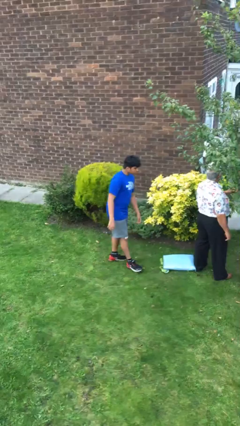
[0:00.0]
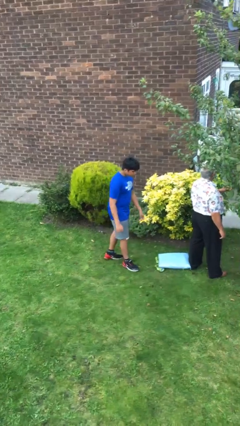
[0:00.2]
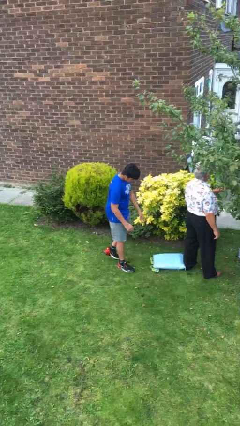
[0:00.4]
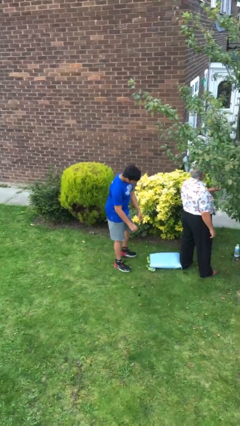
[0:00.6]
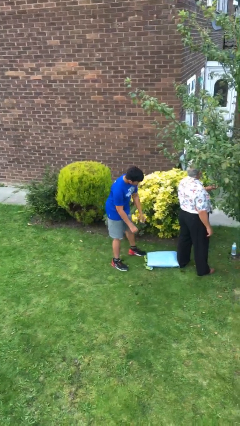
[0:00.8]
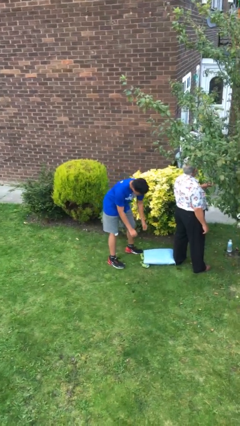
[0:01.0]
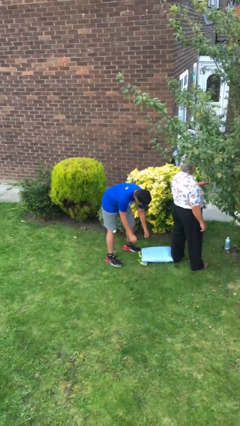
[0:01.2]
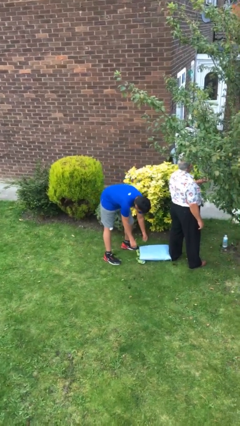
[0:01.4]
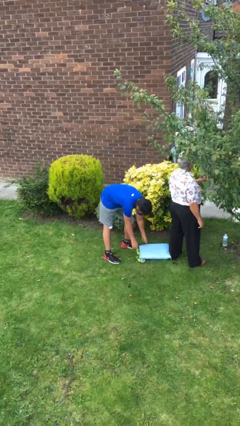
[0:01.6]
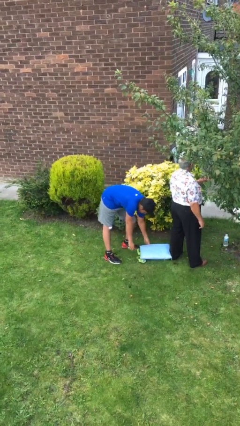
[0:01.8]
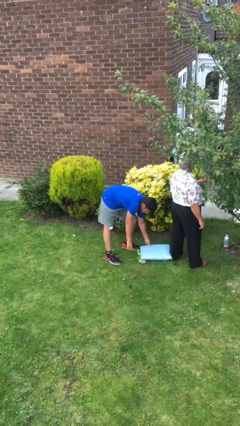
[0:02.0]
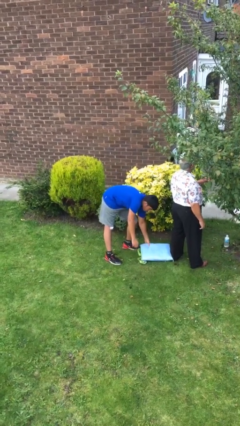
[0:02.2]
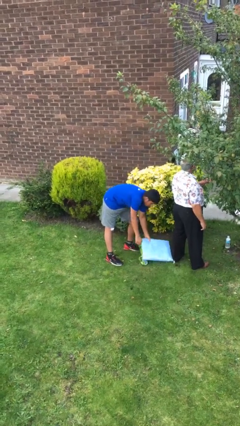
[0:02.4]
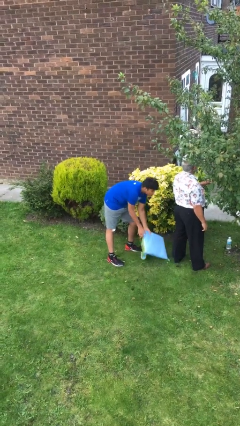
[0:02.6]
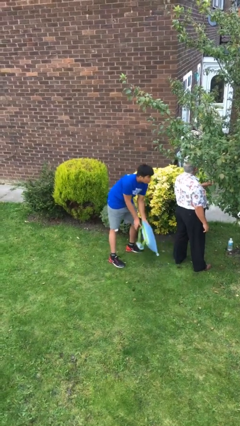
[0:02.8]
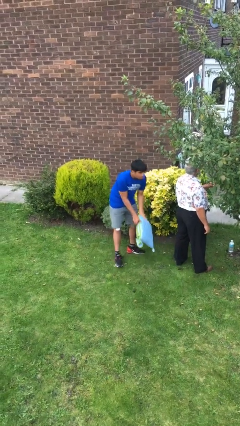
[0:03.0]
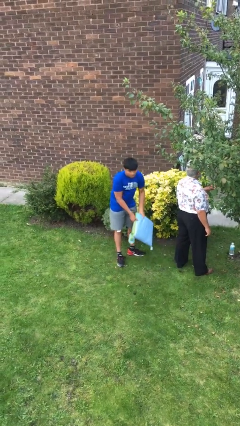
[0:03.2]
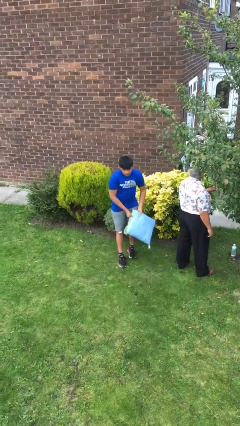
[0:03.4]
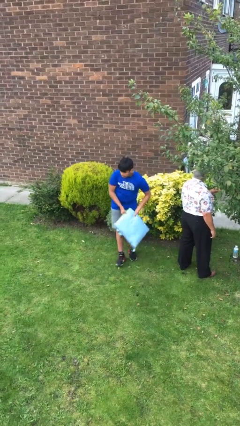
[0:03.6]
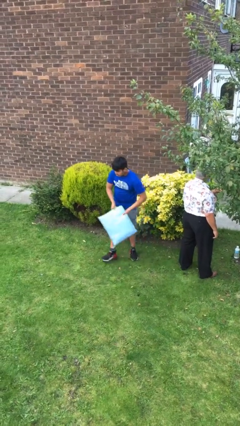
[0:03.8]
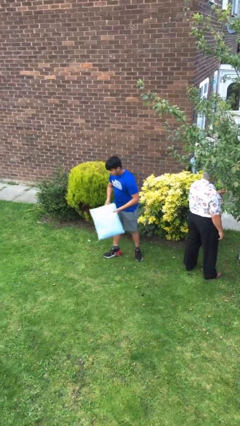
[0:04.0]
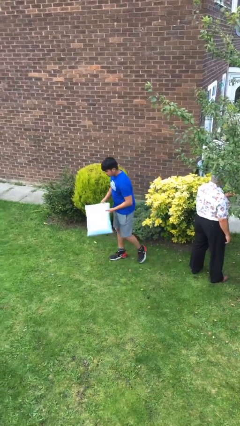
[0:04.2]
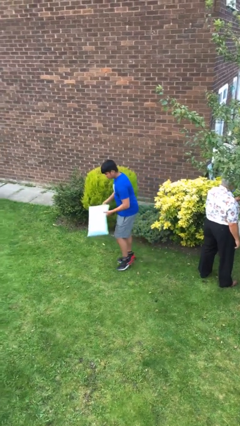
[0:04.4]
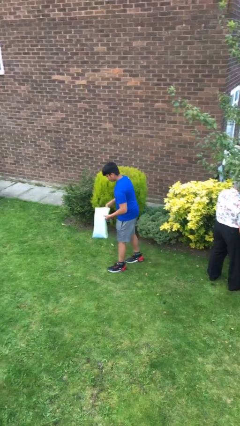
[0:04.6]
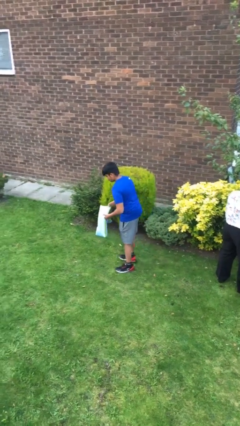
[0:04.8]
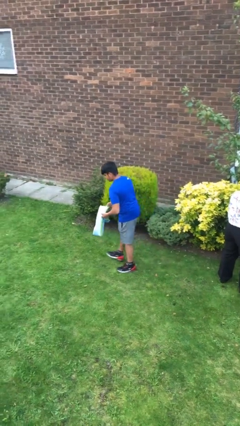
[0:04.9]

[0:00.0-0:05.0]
person steals object from person

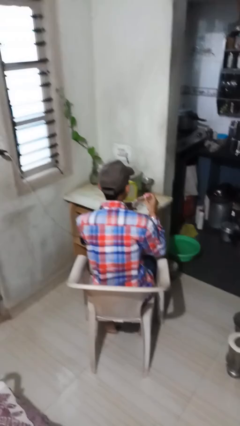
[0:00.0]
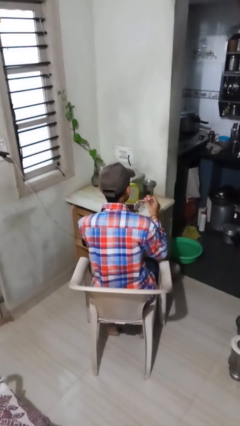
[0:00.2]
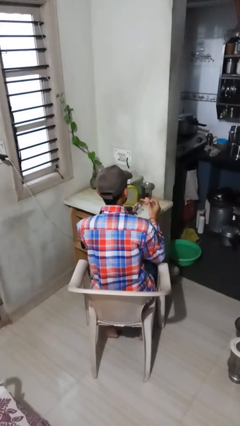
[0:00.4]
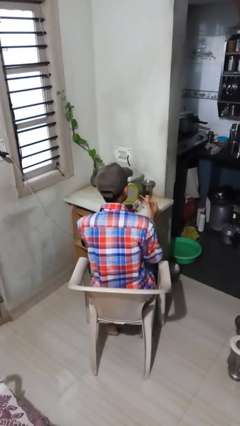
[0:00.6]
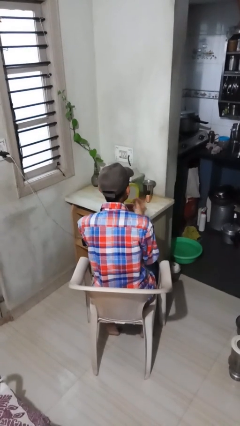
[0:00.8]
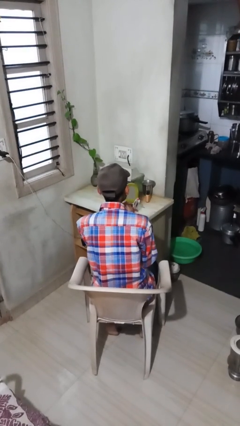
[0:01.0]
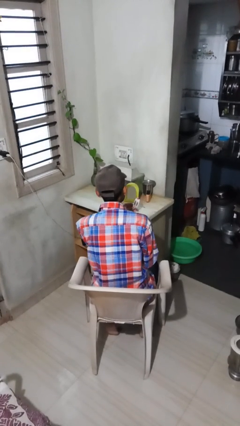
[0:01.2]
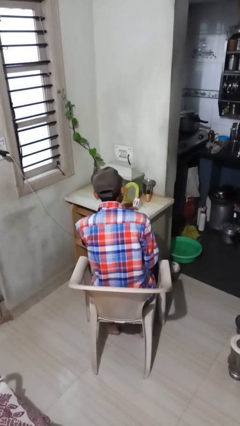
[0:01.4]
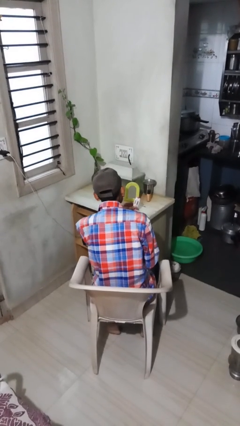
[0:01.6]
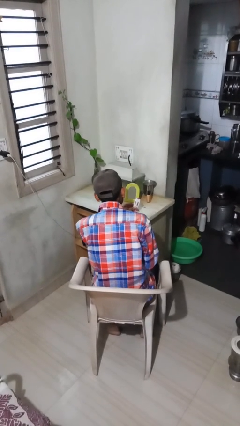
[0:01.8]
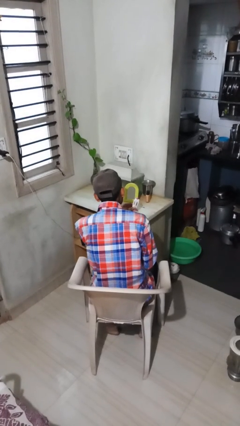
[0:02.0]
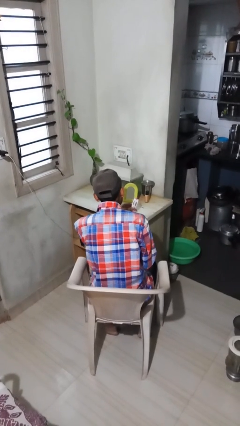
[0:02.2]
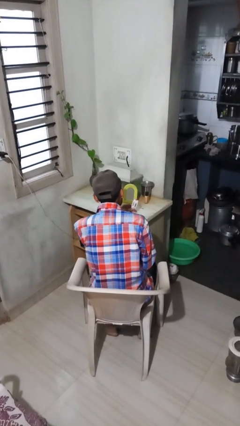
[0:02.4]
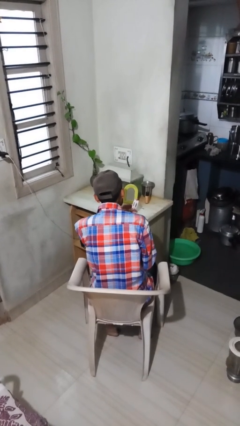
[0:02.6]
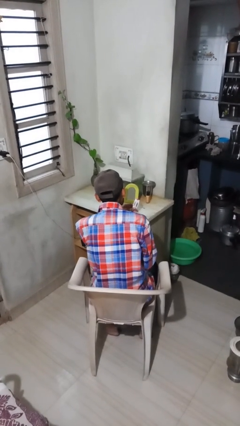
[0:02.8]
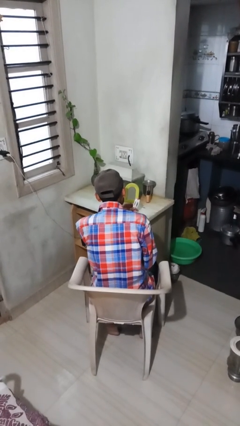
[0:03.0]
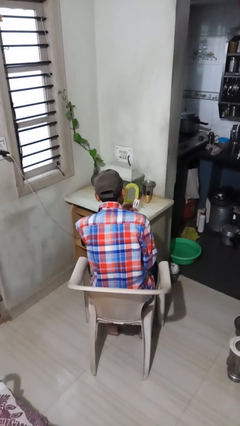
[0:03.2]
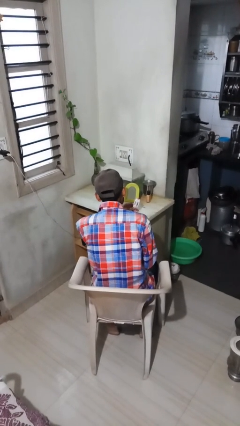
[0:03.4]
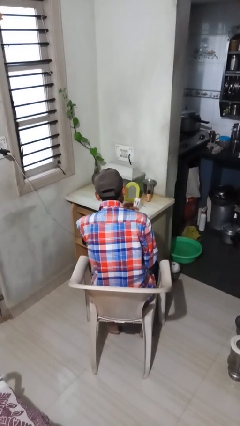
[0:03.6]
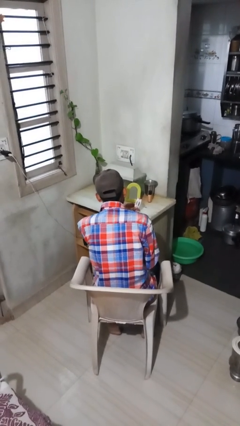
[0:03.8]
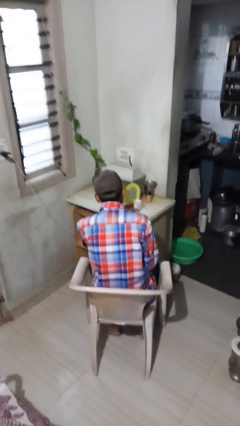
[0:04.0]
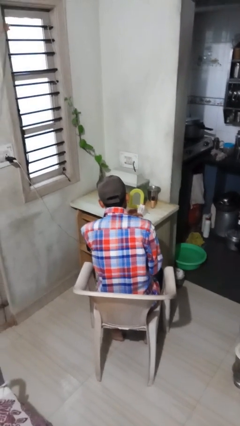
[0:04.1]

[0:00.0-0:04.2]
person applies lip makeup

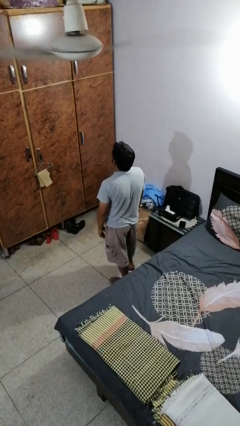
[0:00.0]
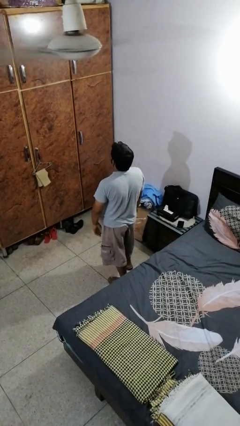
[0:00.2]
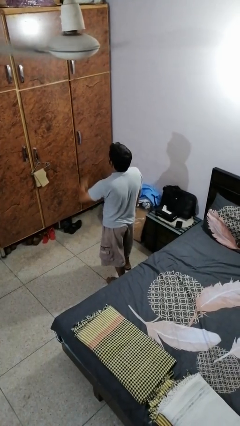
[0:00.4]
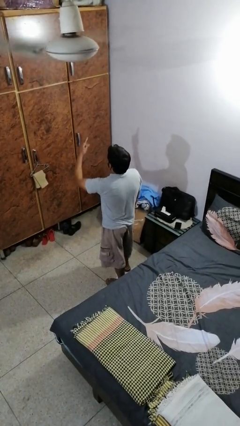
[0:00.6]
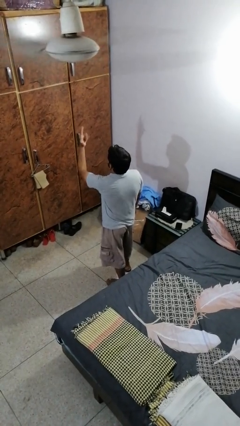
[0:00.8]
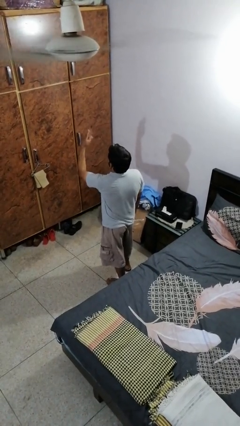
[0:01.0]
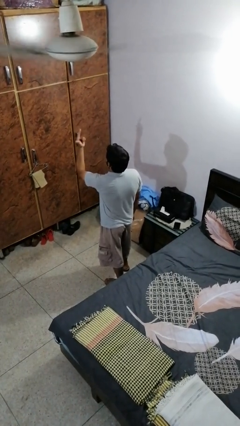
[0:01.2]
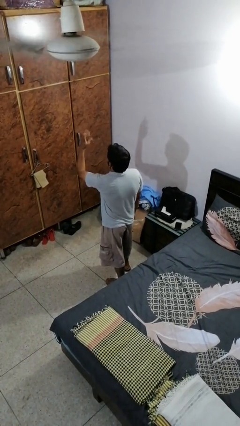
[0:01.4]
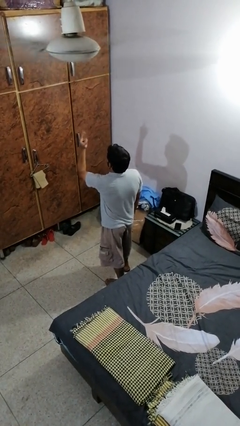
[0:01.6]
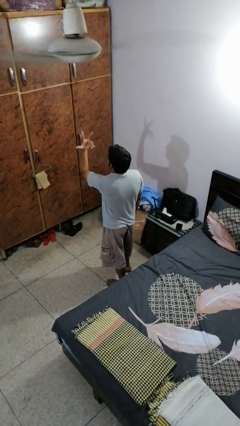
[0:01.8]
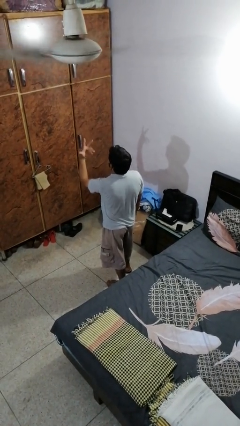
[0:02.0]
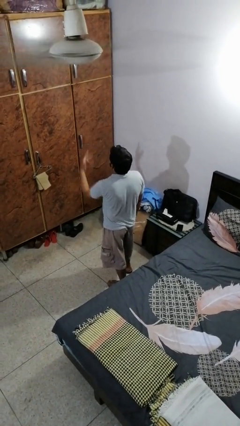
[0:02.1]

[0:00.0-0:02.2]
person snaps fingers

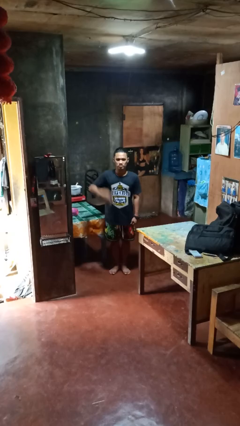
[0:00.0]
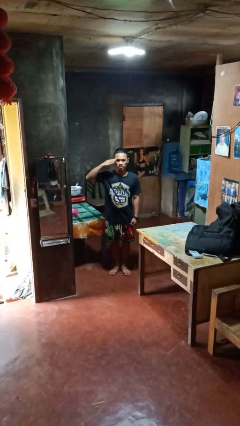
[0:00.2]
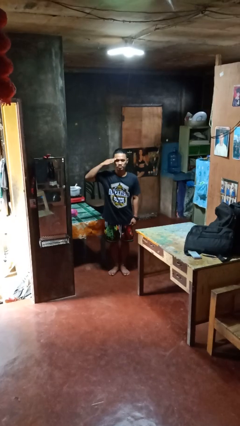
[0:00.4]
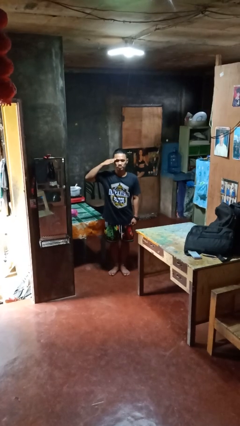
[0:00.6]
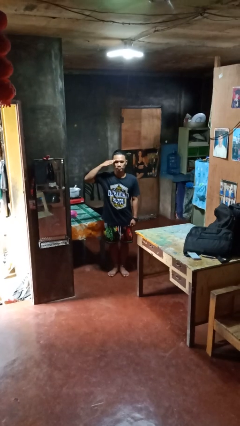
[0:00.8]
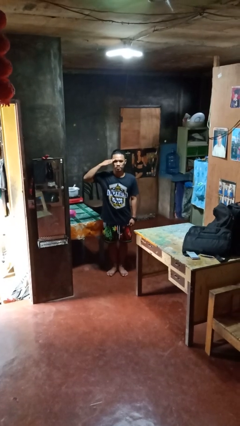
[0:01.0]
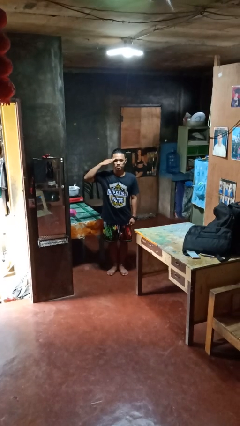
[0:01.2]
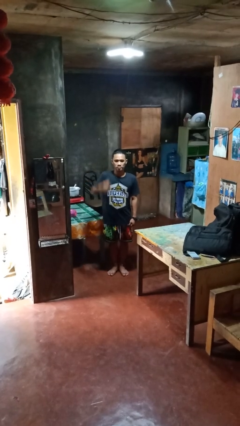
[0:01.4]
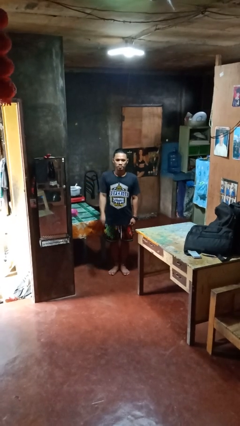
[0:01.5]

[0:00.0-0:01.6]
person salutes

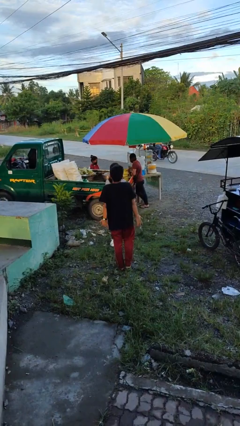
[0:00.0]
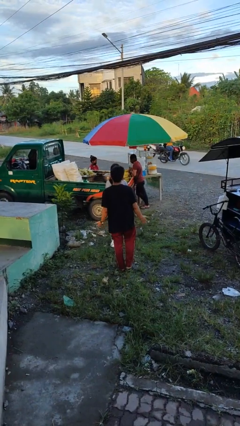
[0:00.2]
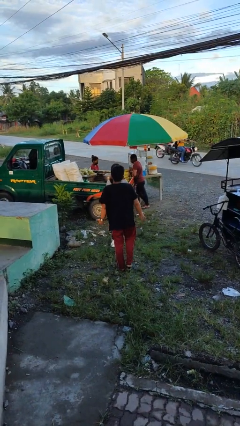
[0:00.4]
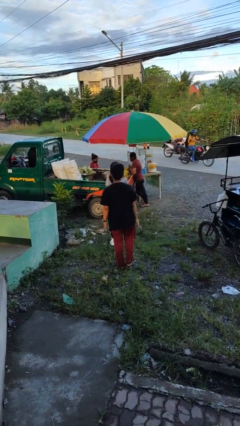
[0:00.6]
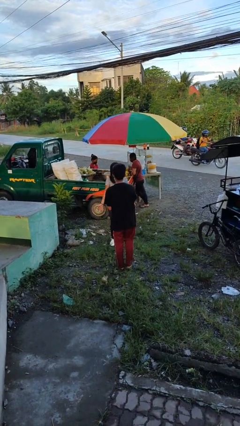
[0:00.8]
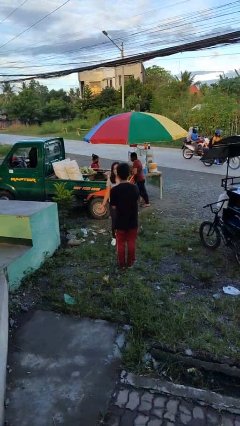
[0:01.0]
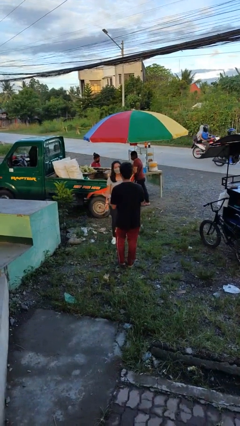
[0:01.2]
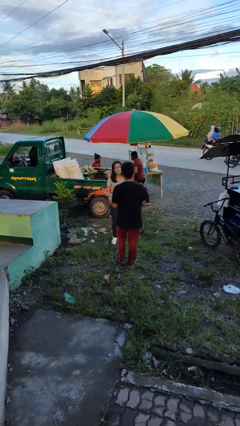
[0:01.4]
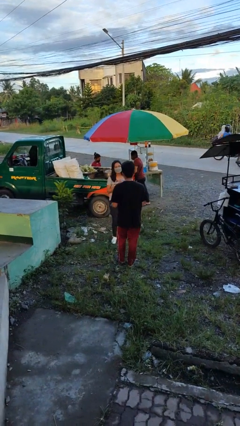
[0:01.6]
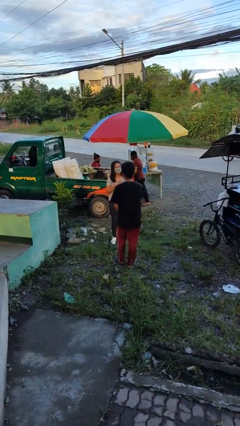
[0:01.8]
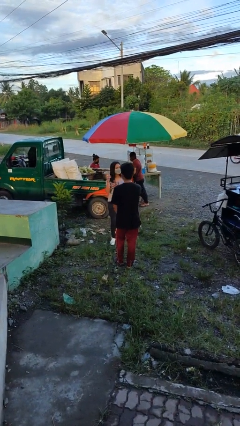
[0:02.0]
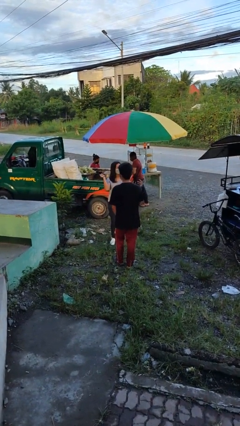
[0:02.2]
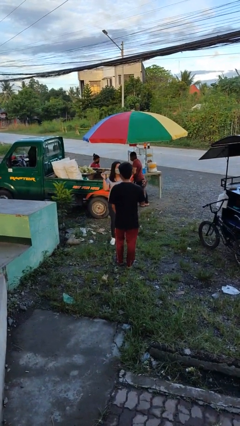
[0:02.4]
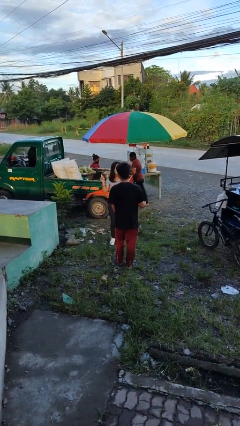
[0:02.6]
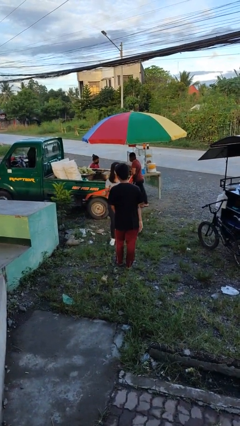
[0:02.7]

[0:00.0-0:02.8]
person talks to person

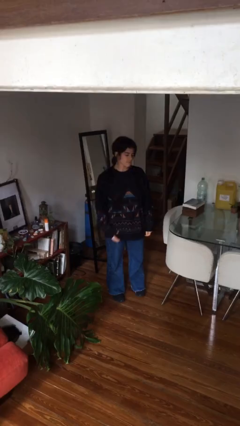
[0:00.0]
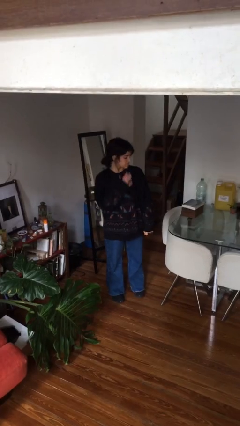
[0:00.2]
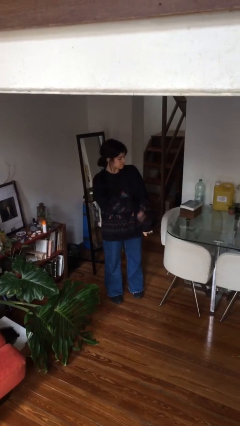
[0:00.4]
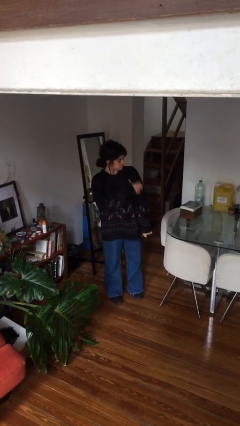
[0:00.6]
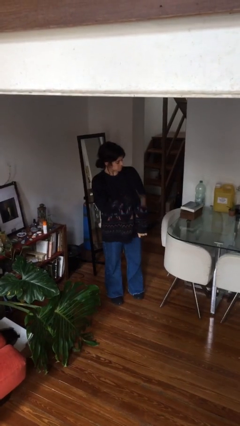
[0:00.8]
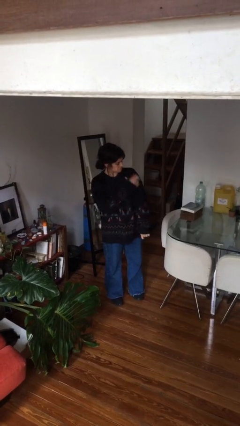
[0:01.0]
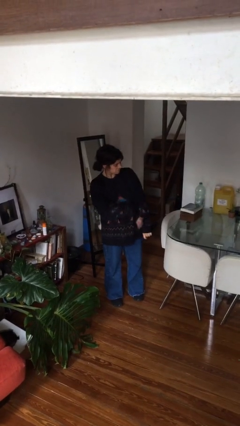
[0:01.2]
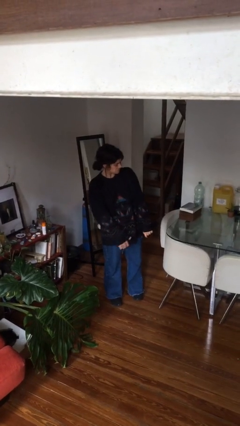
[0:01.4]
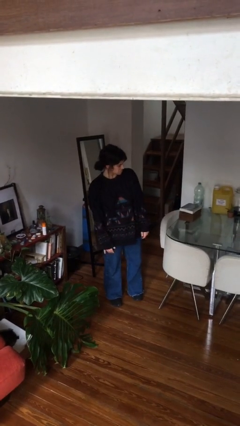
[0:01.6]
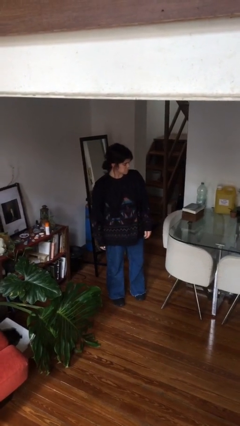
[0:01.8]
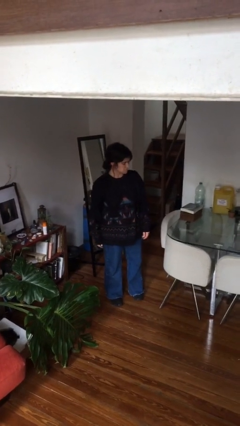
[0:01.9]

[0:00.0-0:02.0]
person swats bug
